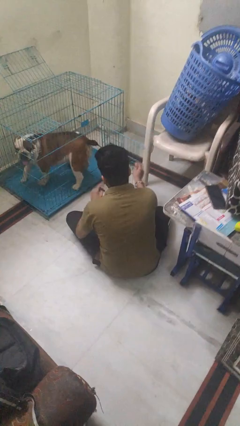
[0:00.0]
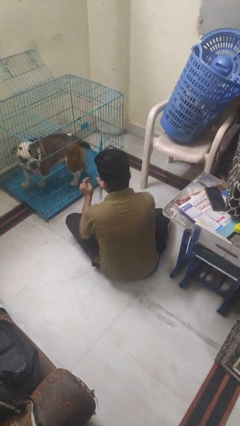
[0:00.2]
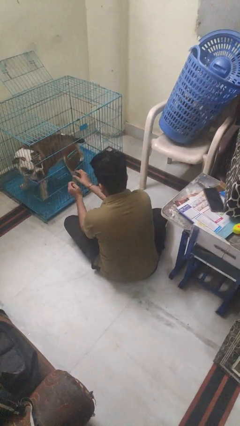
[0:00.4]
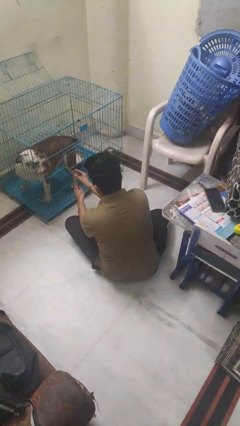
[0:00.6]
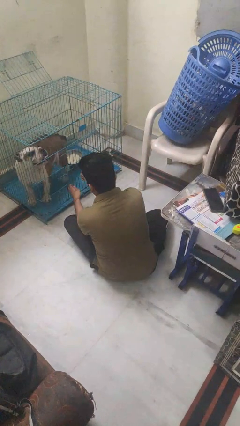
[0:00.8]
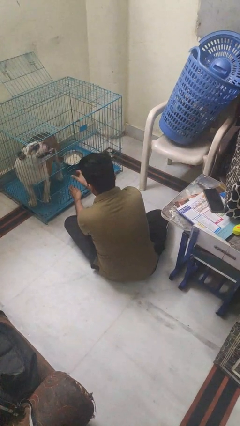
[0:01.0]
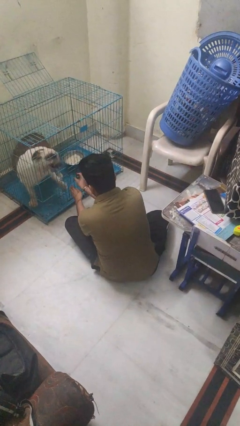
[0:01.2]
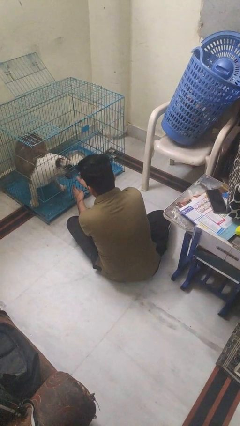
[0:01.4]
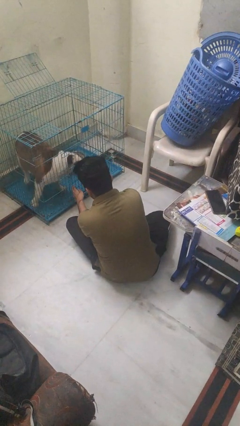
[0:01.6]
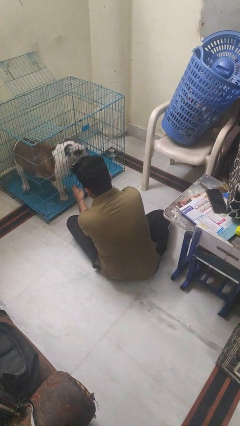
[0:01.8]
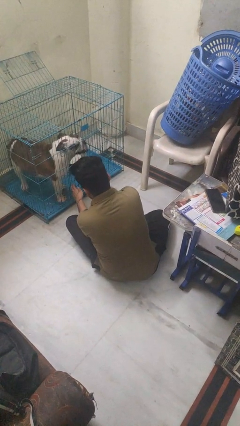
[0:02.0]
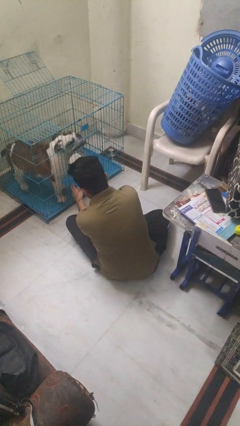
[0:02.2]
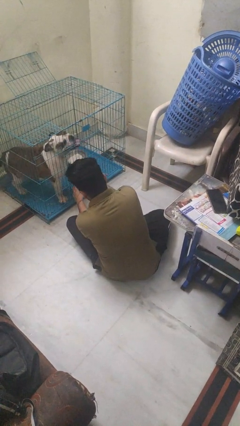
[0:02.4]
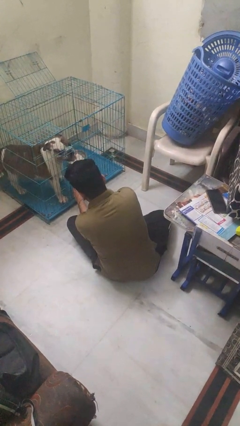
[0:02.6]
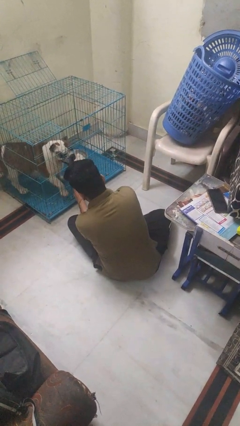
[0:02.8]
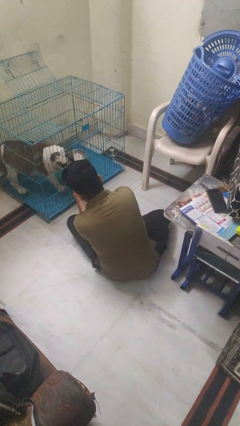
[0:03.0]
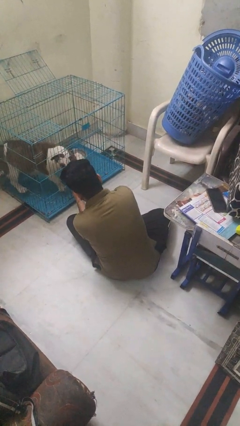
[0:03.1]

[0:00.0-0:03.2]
person crates dog

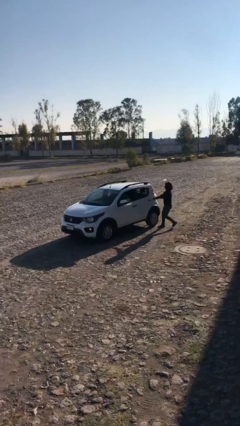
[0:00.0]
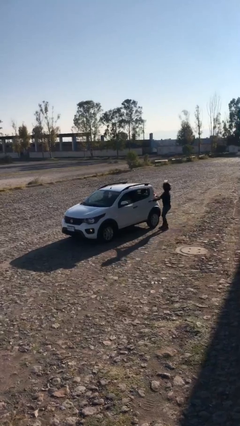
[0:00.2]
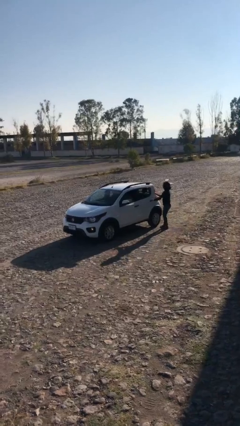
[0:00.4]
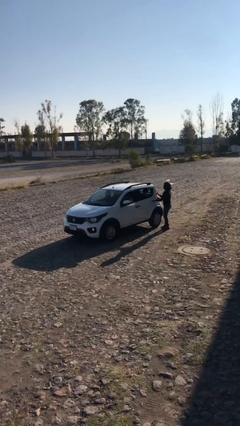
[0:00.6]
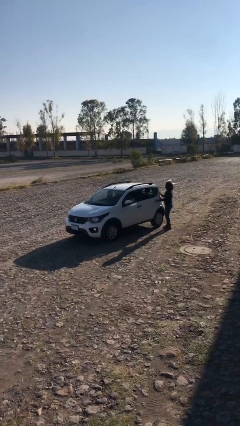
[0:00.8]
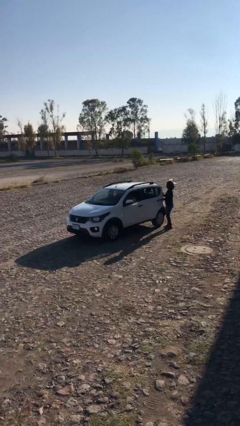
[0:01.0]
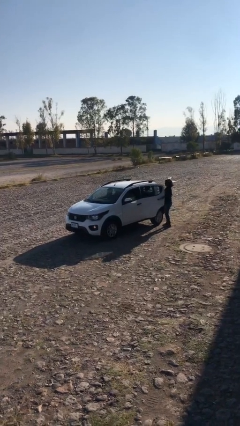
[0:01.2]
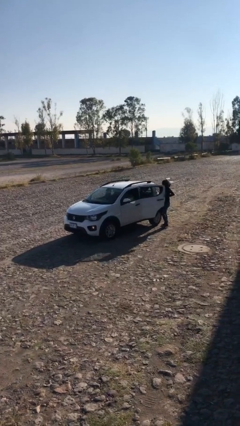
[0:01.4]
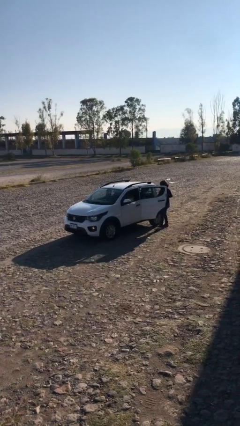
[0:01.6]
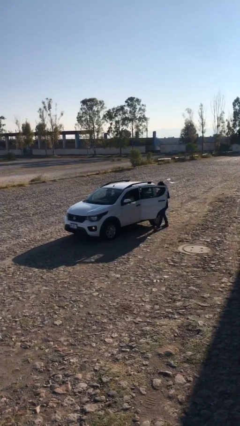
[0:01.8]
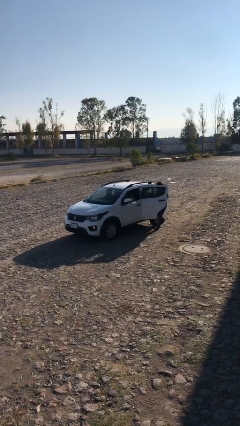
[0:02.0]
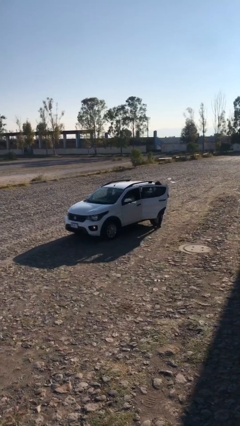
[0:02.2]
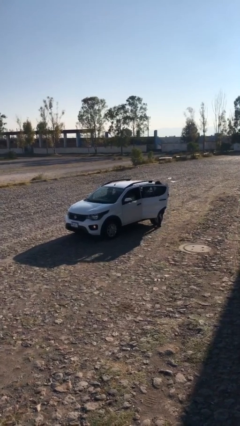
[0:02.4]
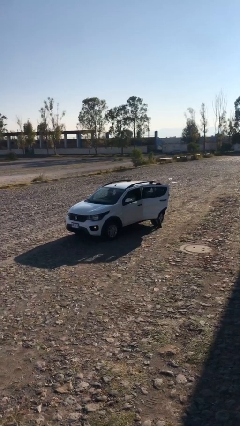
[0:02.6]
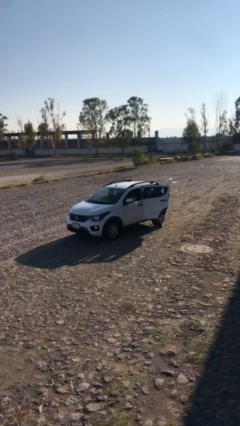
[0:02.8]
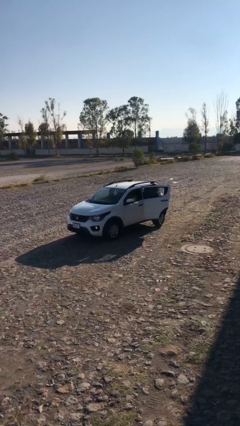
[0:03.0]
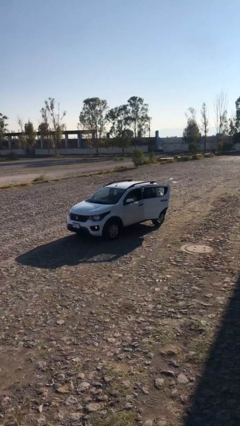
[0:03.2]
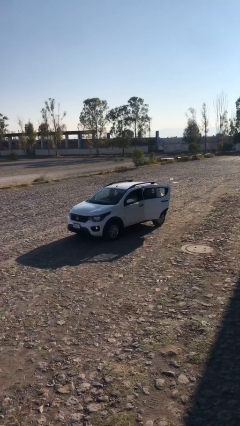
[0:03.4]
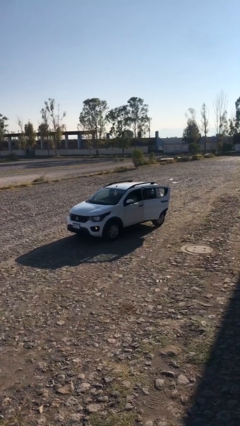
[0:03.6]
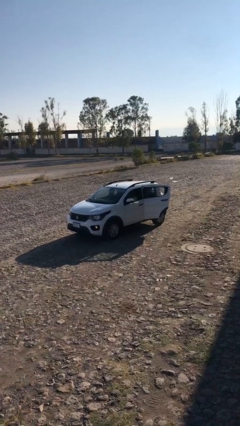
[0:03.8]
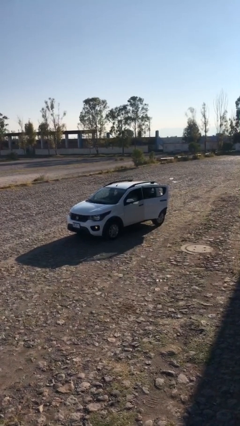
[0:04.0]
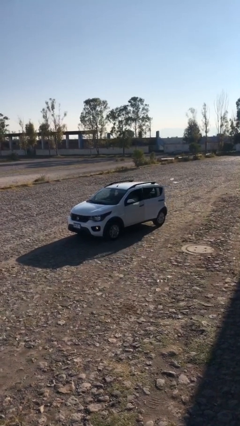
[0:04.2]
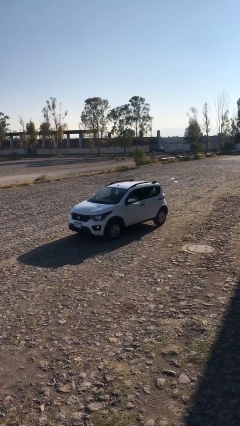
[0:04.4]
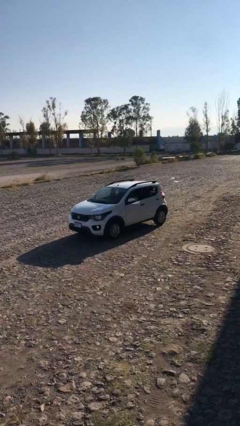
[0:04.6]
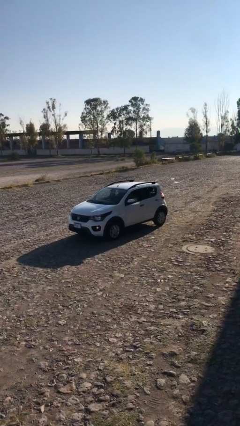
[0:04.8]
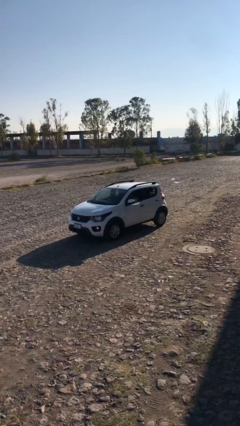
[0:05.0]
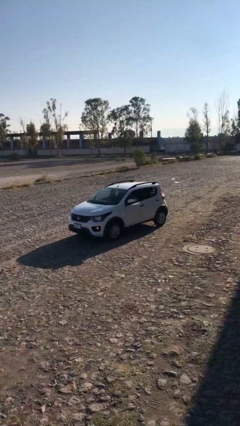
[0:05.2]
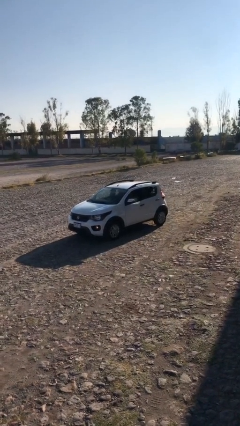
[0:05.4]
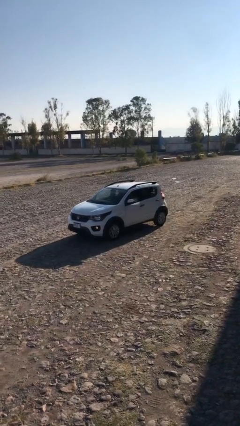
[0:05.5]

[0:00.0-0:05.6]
car picks up person

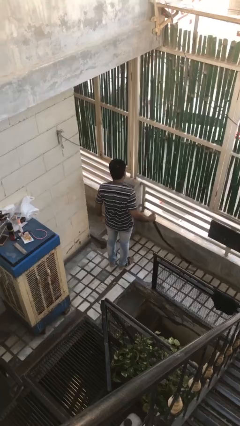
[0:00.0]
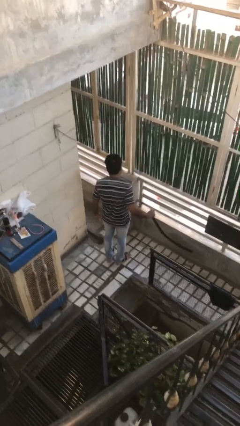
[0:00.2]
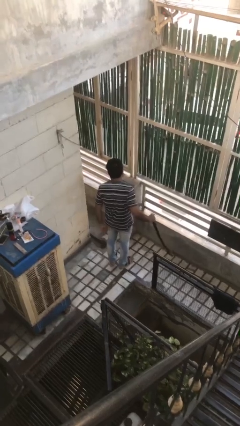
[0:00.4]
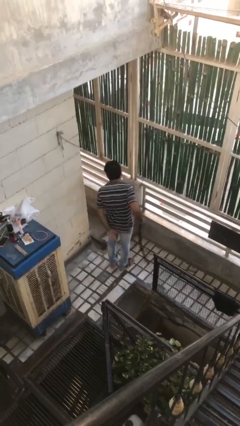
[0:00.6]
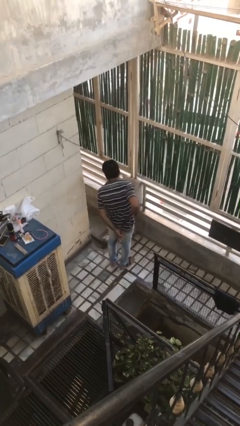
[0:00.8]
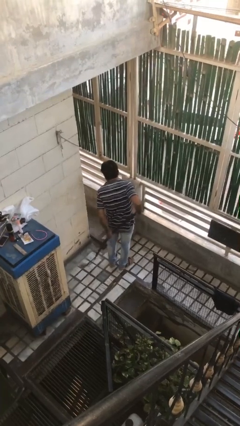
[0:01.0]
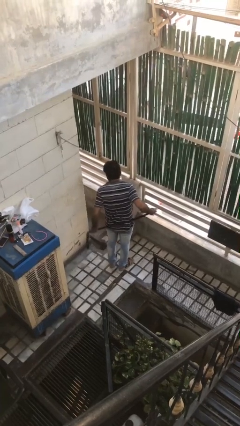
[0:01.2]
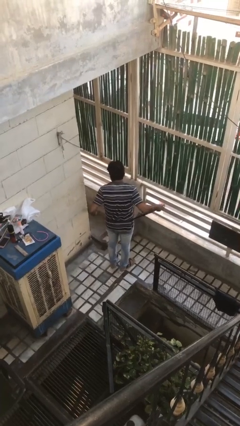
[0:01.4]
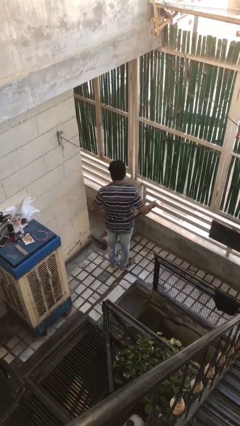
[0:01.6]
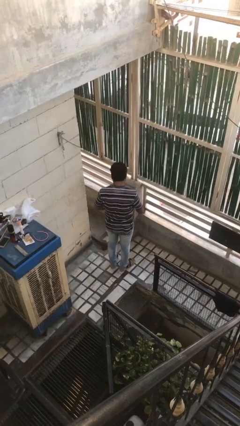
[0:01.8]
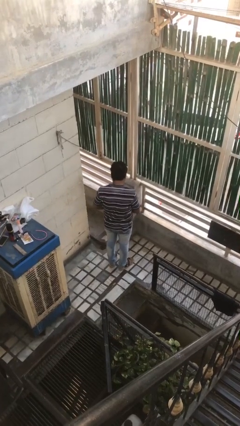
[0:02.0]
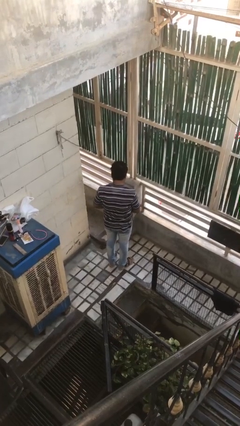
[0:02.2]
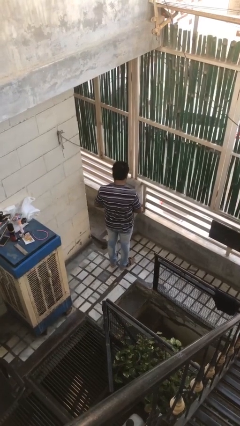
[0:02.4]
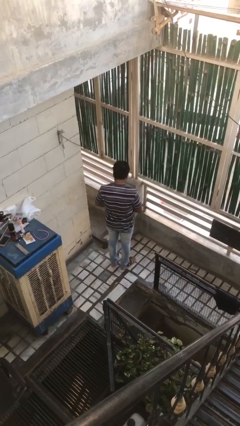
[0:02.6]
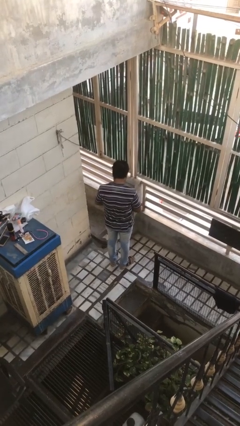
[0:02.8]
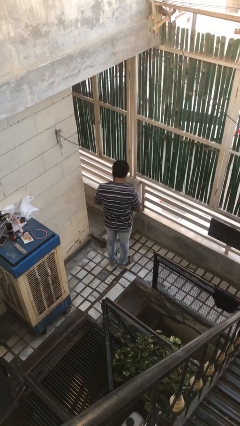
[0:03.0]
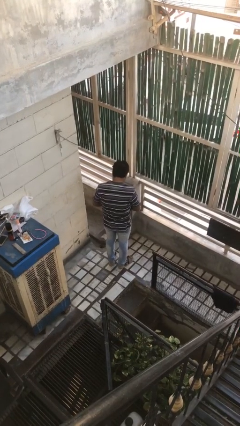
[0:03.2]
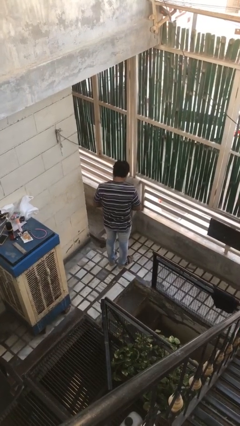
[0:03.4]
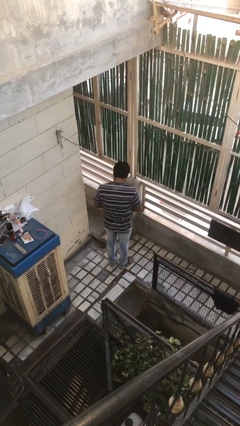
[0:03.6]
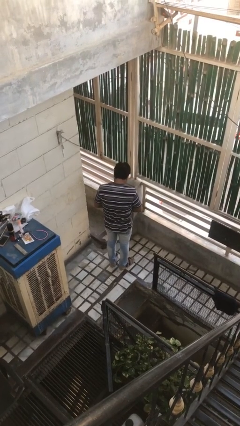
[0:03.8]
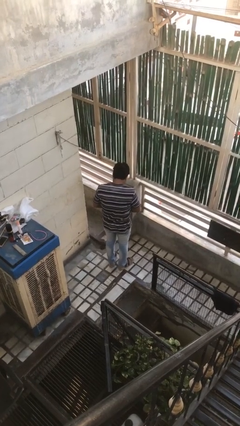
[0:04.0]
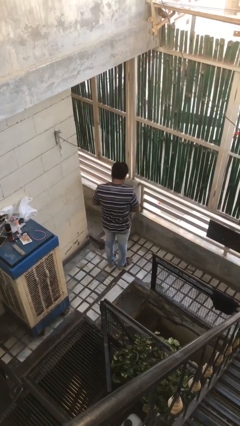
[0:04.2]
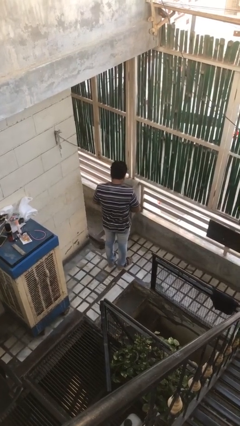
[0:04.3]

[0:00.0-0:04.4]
person puts on belt

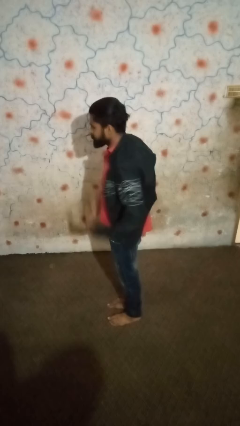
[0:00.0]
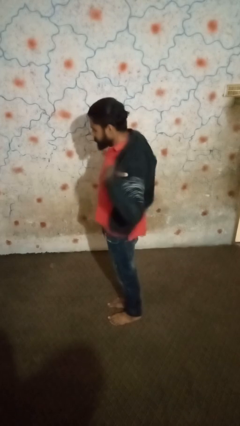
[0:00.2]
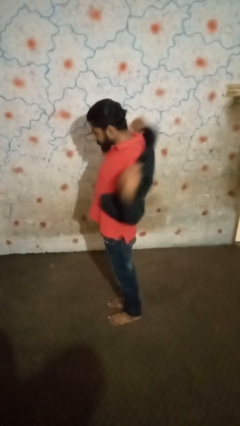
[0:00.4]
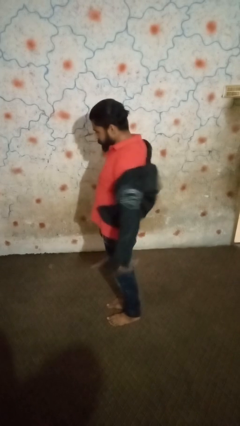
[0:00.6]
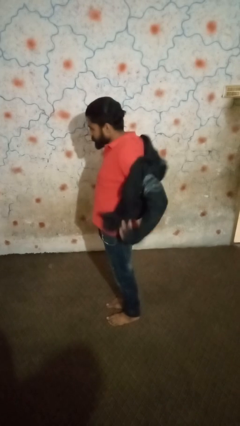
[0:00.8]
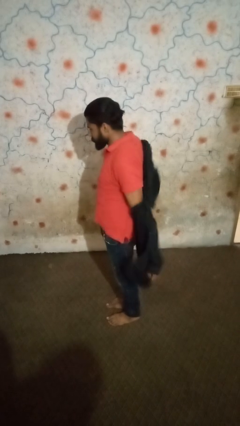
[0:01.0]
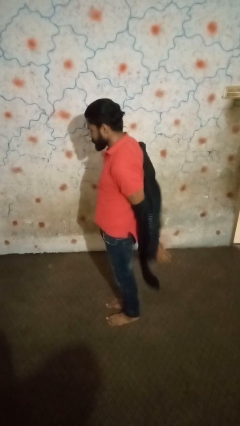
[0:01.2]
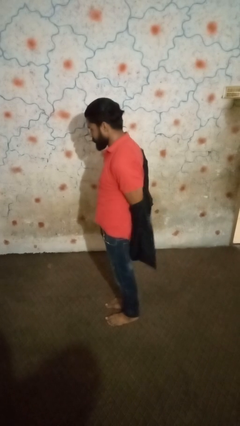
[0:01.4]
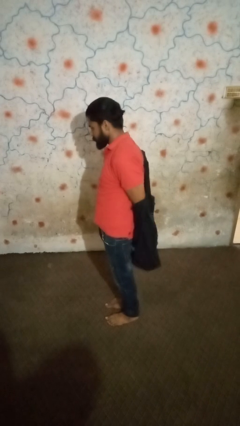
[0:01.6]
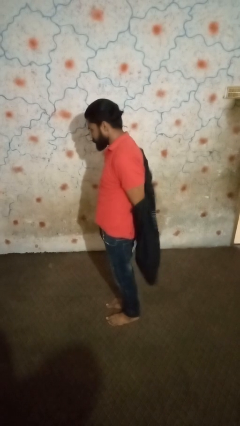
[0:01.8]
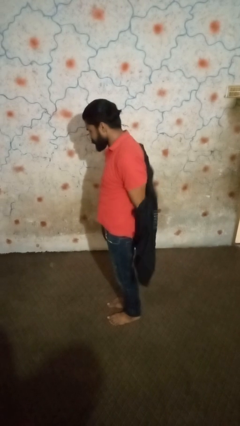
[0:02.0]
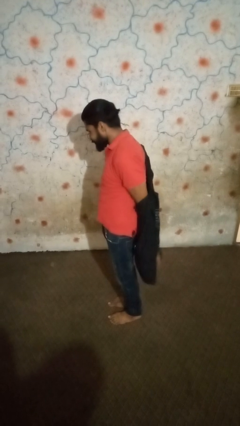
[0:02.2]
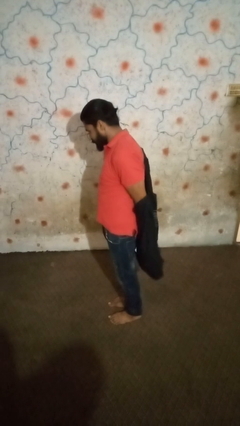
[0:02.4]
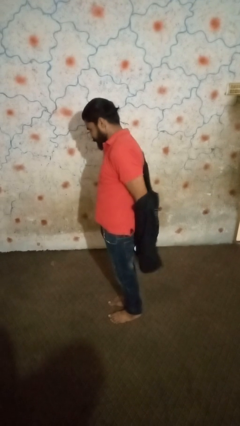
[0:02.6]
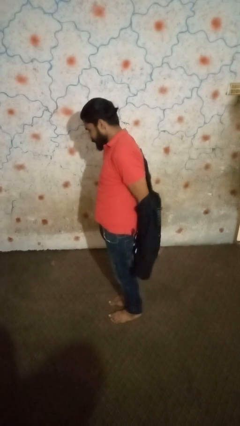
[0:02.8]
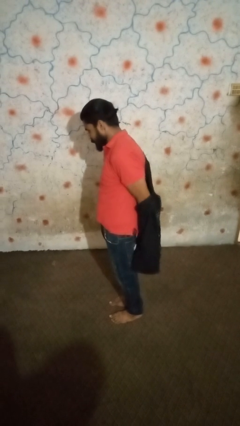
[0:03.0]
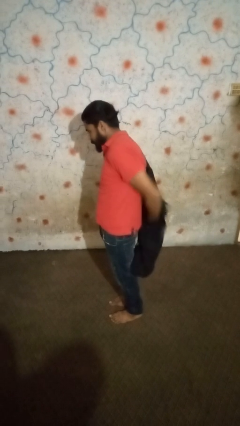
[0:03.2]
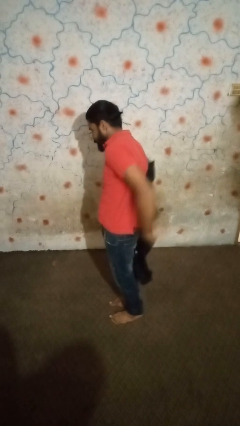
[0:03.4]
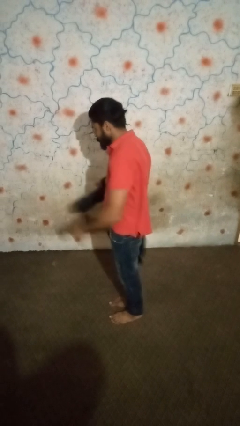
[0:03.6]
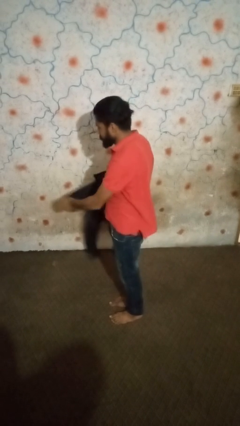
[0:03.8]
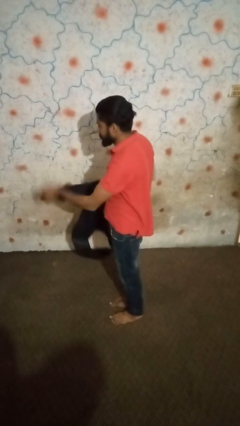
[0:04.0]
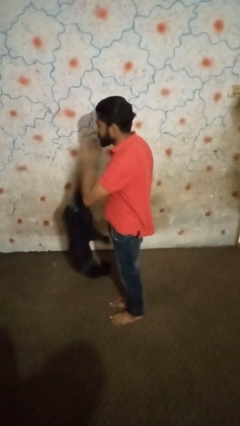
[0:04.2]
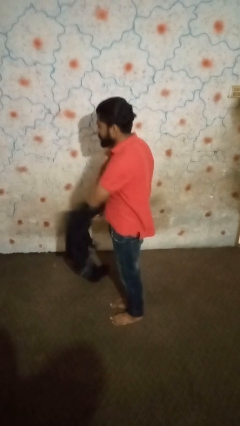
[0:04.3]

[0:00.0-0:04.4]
person takes off shirt
